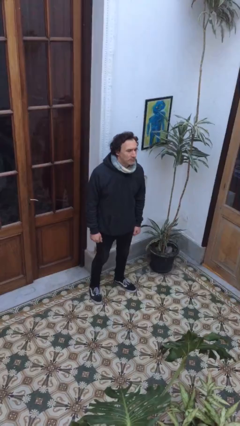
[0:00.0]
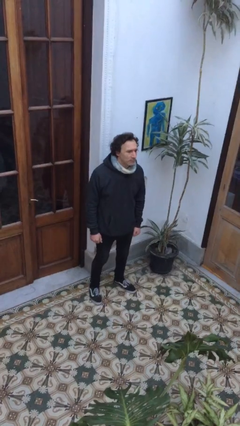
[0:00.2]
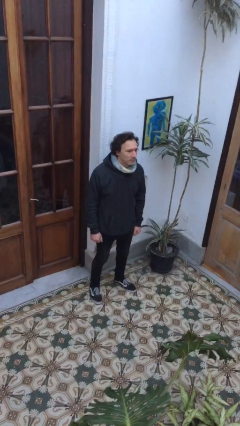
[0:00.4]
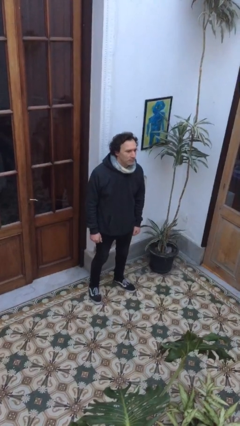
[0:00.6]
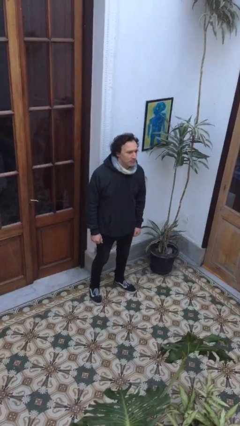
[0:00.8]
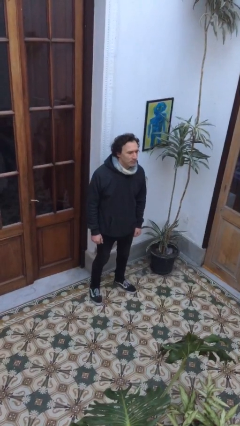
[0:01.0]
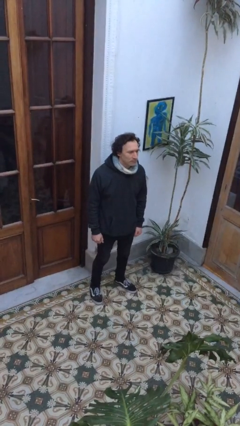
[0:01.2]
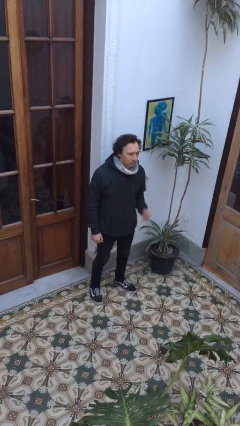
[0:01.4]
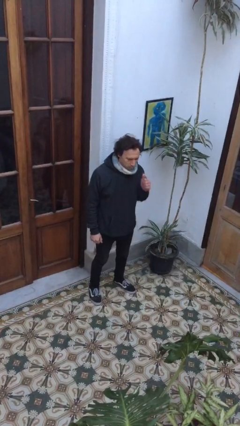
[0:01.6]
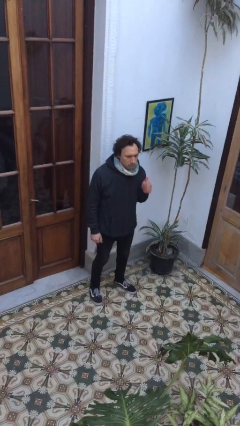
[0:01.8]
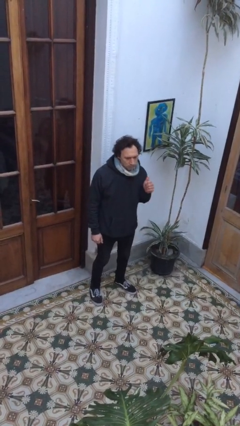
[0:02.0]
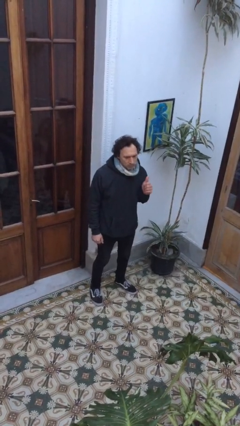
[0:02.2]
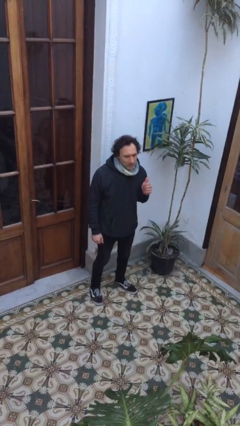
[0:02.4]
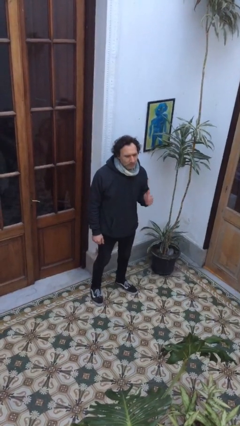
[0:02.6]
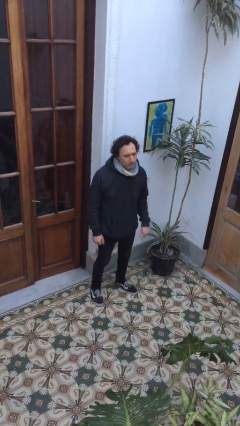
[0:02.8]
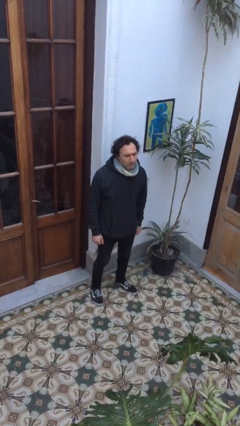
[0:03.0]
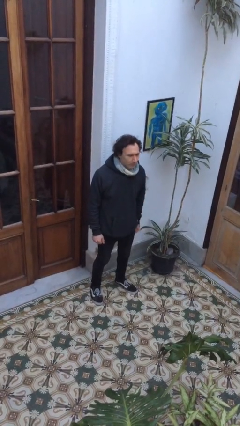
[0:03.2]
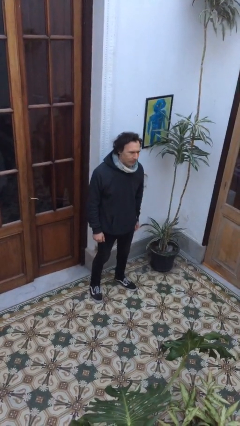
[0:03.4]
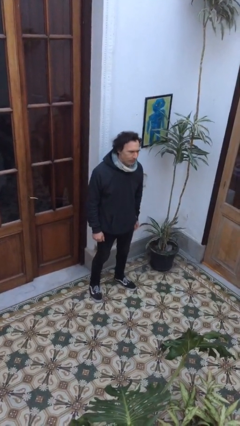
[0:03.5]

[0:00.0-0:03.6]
person gestures thumbs up

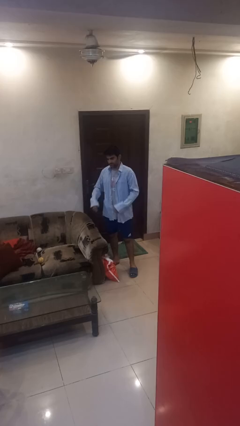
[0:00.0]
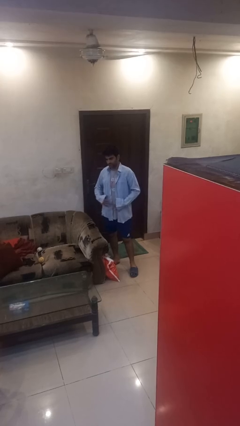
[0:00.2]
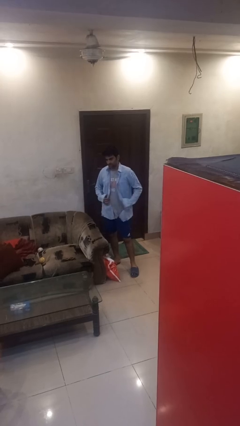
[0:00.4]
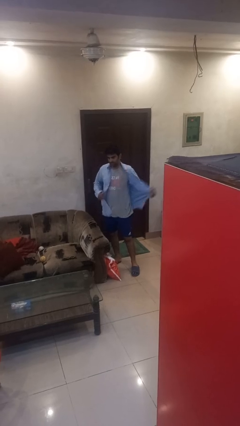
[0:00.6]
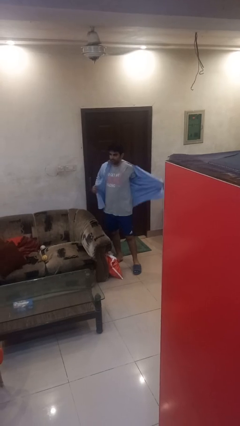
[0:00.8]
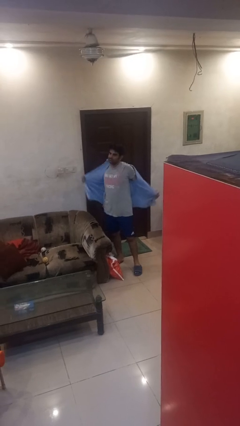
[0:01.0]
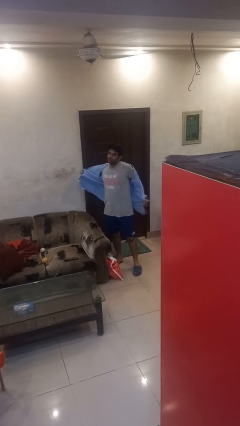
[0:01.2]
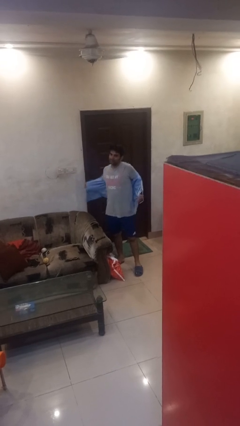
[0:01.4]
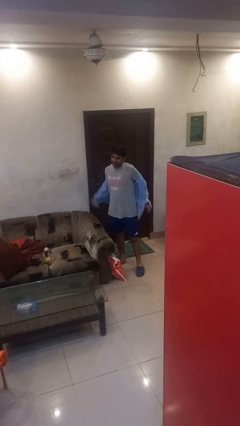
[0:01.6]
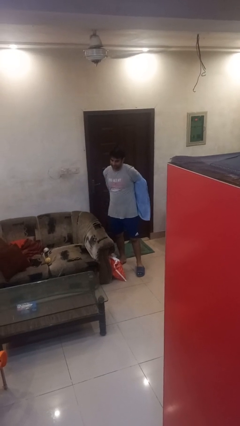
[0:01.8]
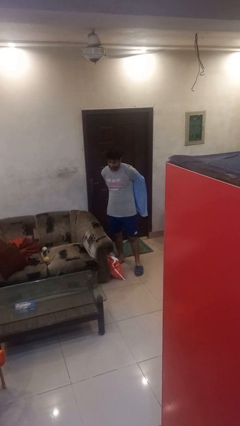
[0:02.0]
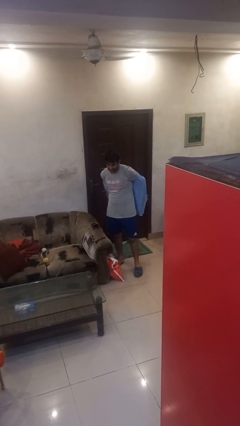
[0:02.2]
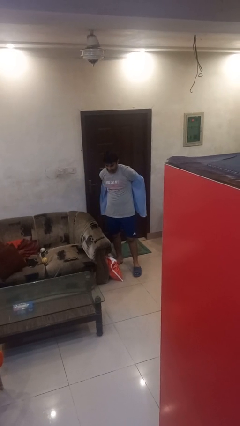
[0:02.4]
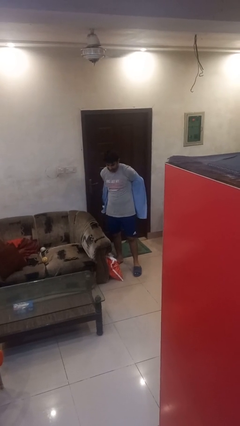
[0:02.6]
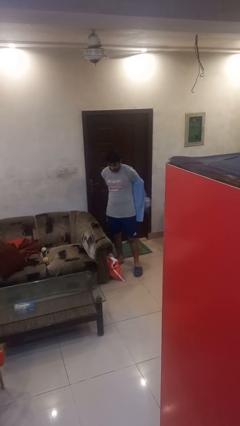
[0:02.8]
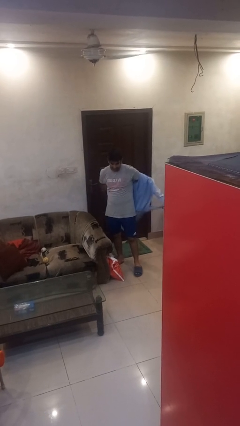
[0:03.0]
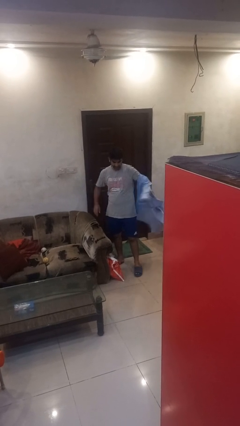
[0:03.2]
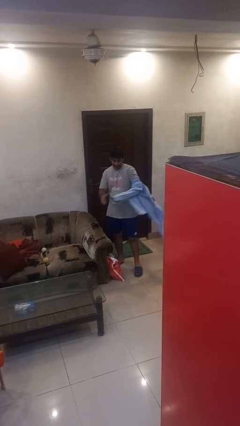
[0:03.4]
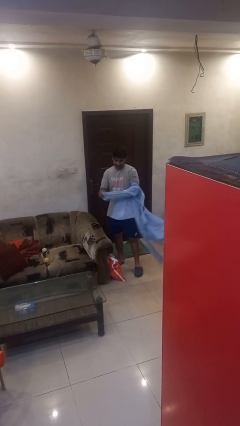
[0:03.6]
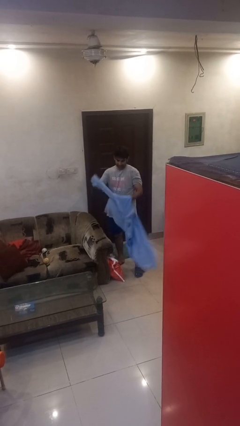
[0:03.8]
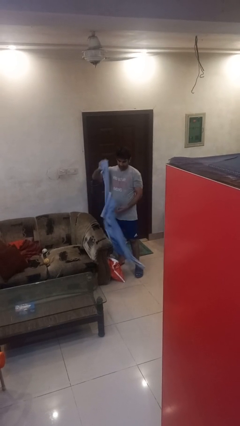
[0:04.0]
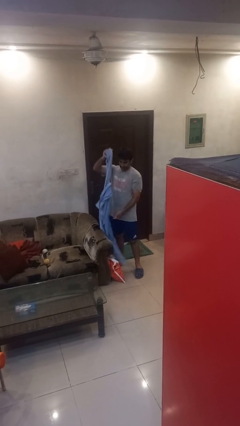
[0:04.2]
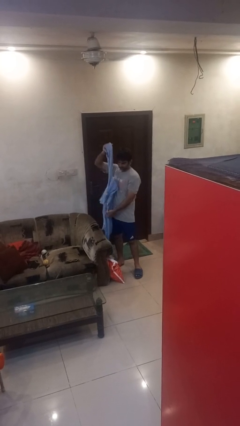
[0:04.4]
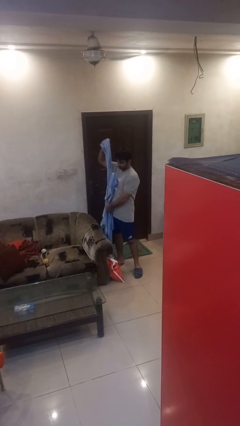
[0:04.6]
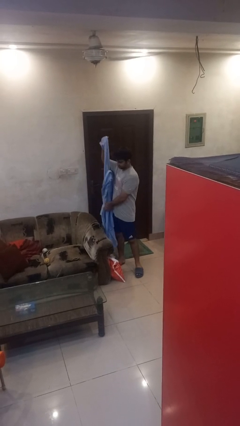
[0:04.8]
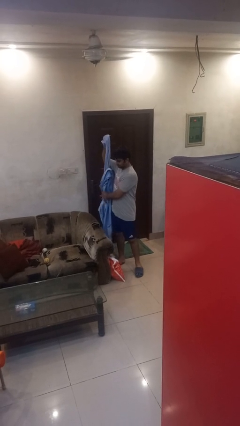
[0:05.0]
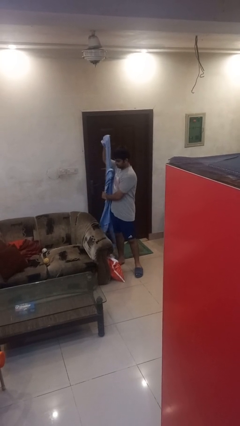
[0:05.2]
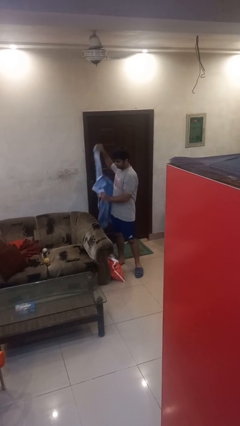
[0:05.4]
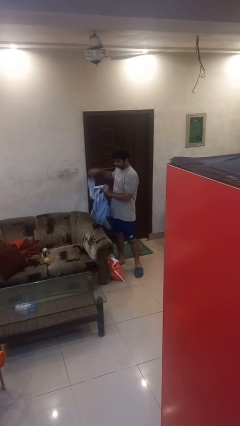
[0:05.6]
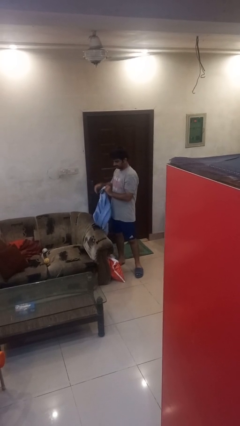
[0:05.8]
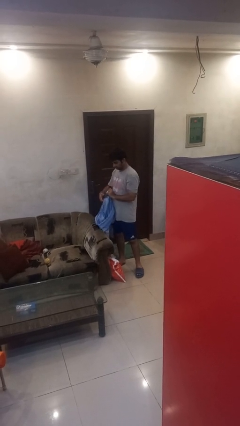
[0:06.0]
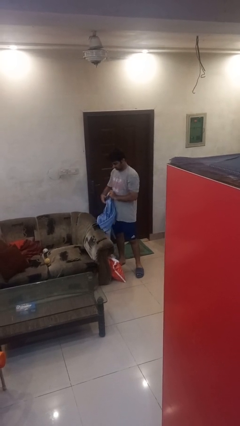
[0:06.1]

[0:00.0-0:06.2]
person takes off shirt

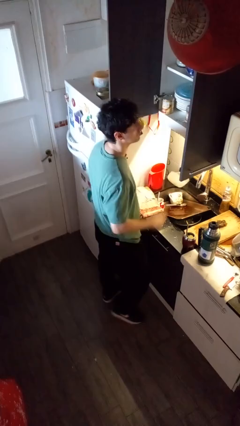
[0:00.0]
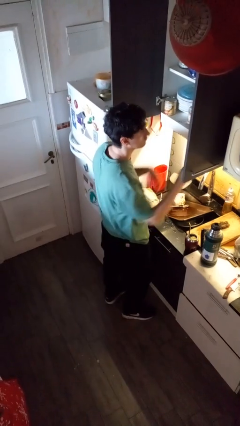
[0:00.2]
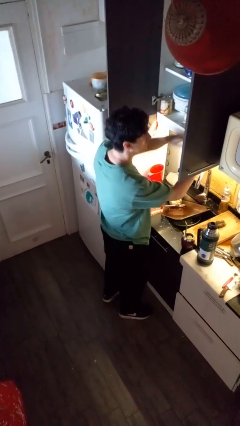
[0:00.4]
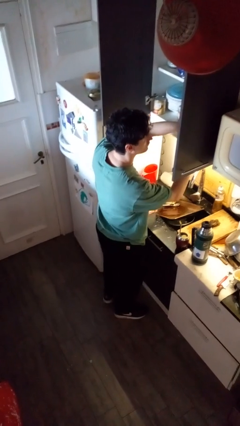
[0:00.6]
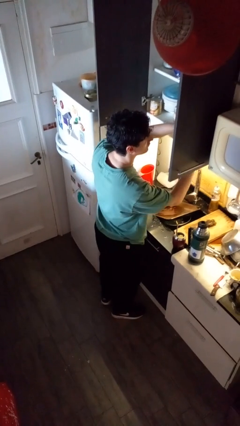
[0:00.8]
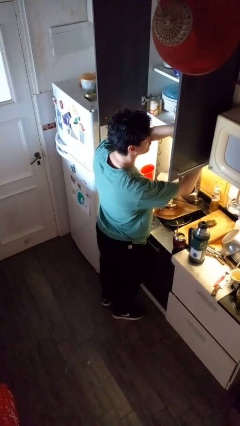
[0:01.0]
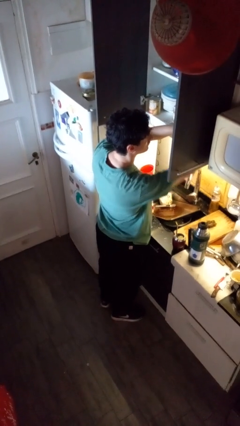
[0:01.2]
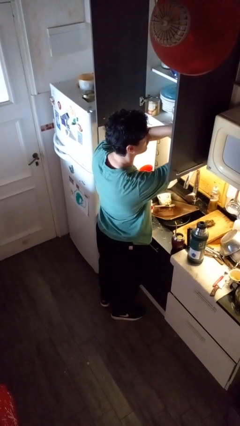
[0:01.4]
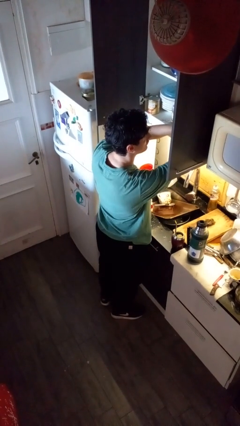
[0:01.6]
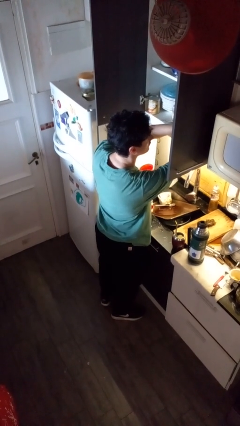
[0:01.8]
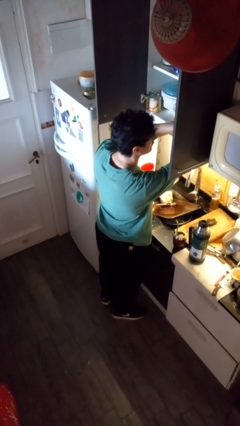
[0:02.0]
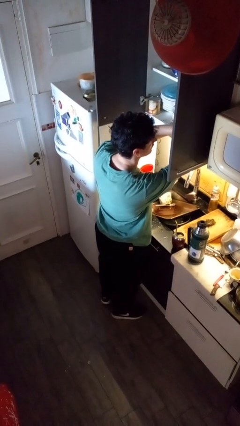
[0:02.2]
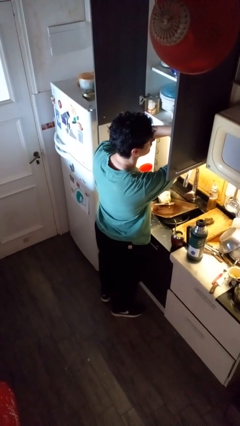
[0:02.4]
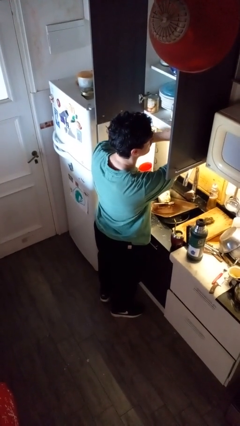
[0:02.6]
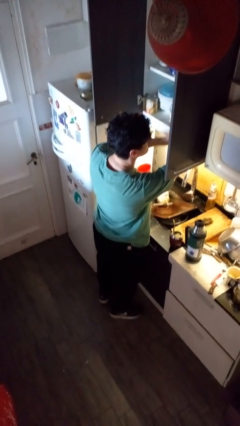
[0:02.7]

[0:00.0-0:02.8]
person searches in kitchen drawer

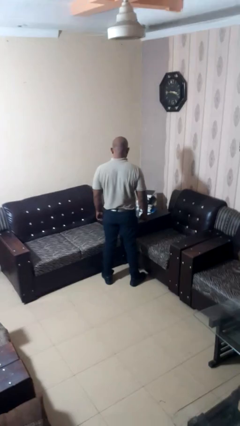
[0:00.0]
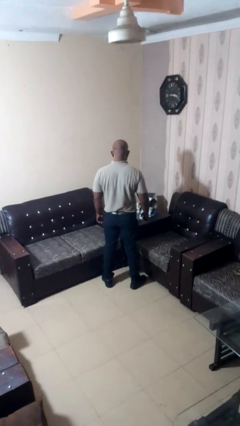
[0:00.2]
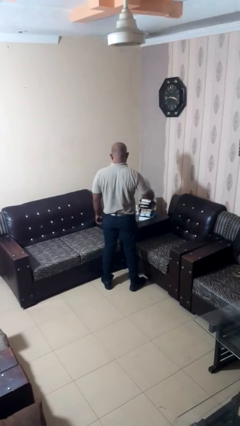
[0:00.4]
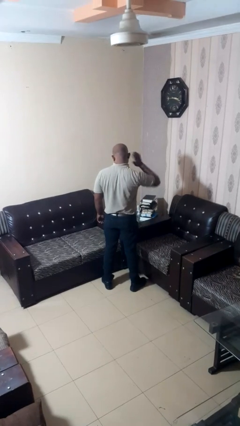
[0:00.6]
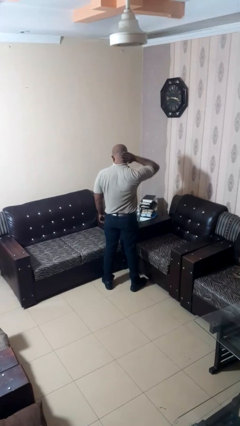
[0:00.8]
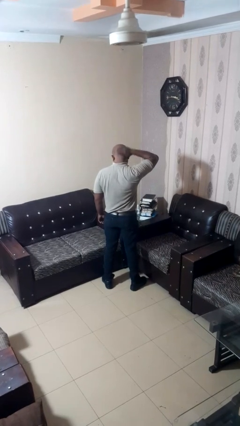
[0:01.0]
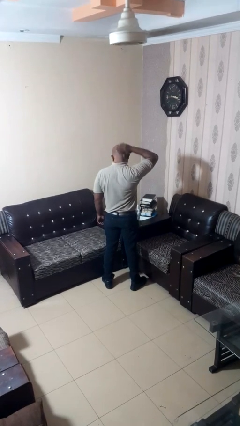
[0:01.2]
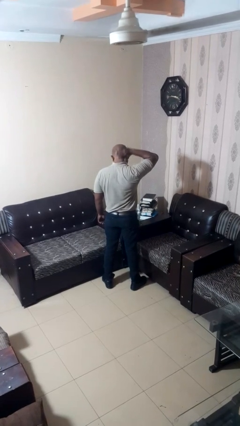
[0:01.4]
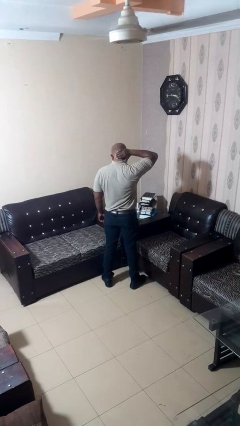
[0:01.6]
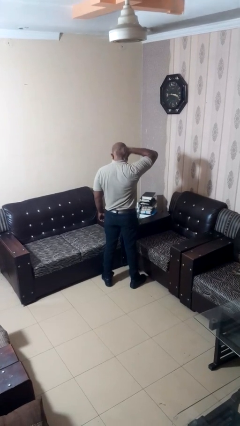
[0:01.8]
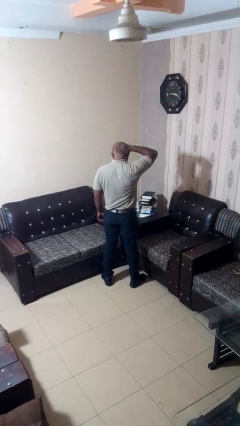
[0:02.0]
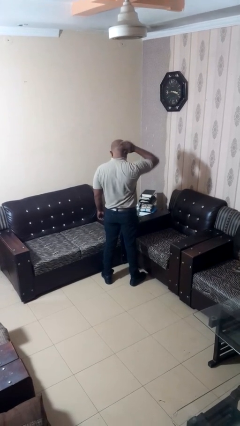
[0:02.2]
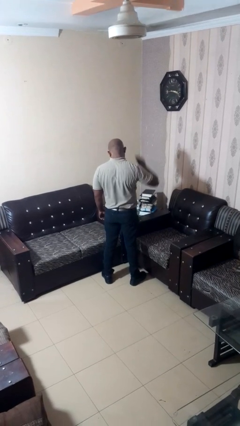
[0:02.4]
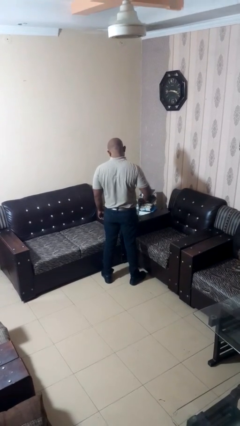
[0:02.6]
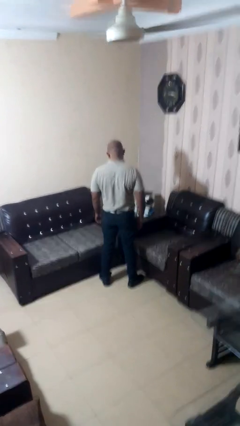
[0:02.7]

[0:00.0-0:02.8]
person rubs neck
